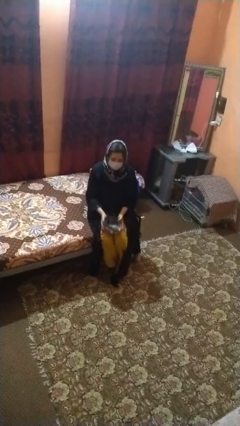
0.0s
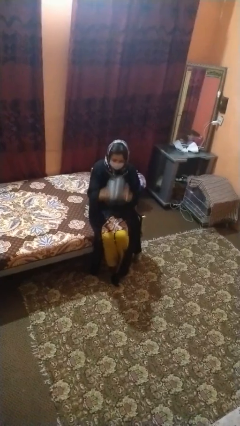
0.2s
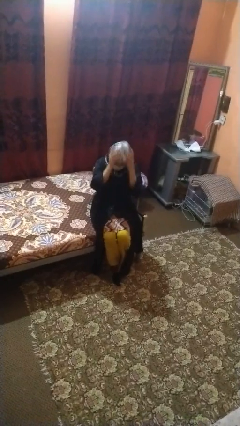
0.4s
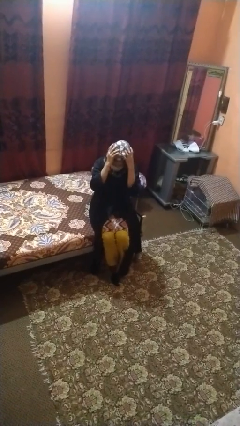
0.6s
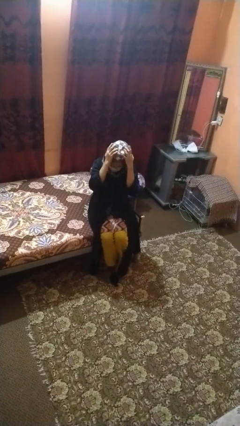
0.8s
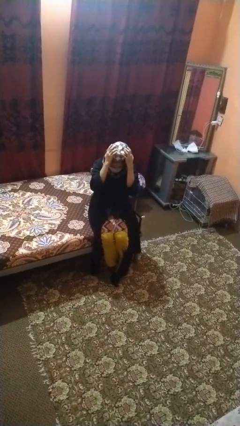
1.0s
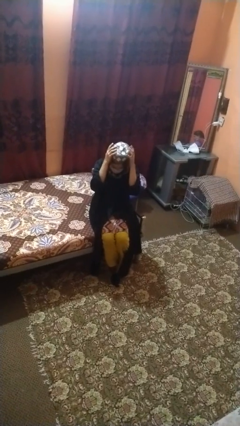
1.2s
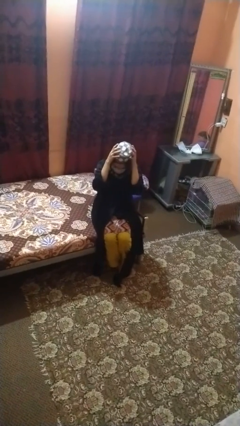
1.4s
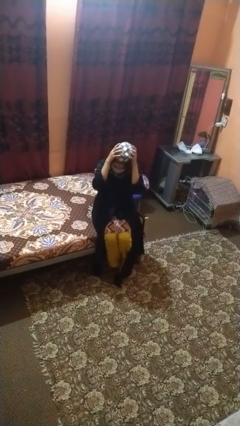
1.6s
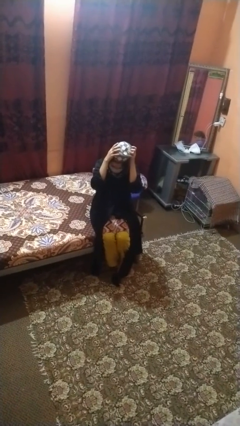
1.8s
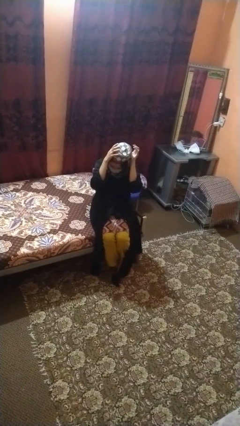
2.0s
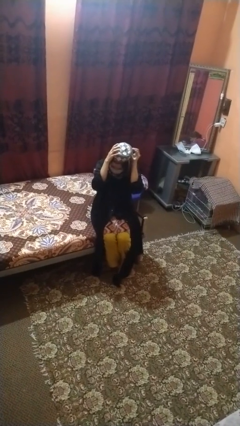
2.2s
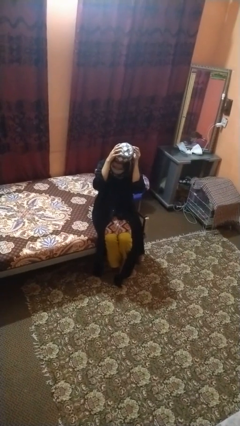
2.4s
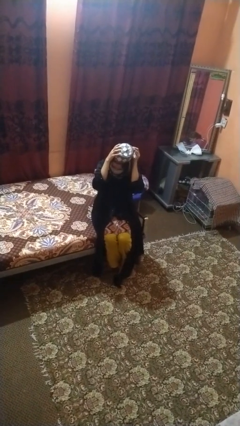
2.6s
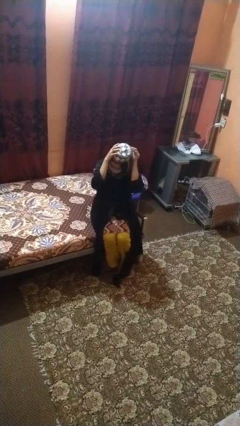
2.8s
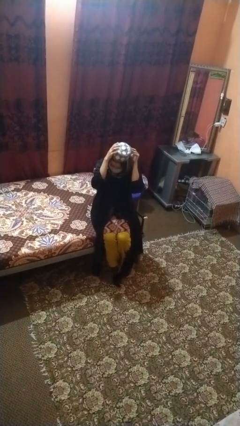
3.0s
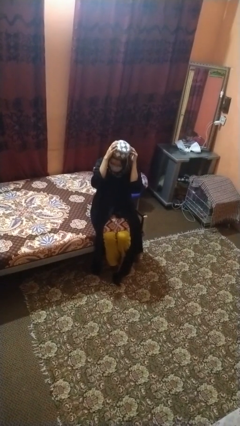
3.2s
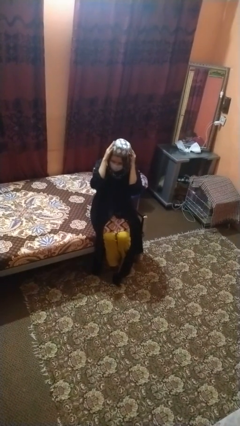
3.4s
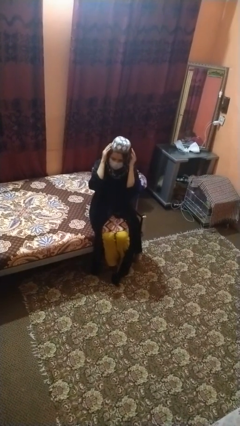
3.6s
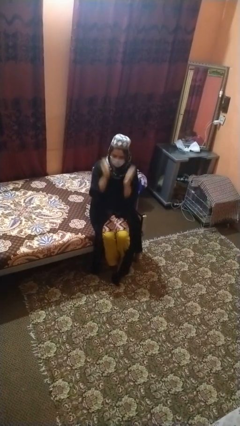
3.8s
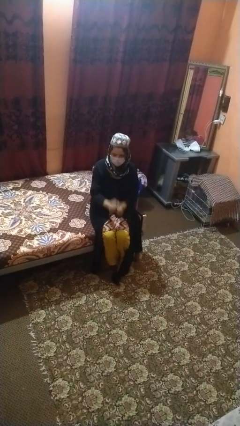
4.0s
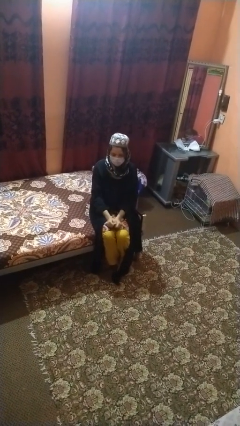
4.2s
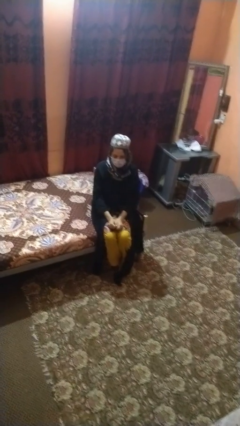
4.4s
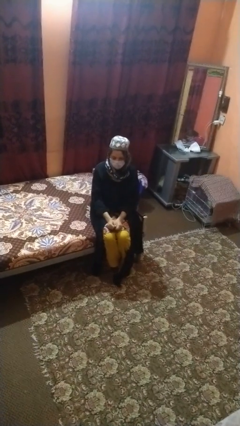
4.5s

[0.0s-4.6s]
person puts on hat

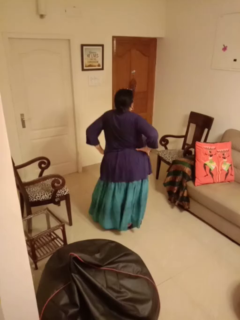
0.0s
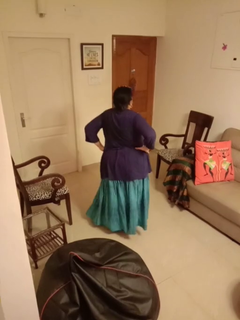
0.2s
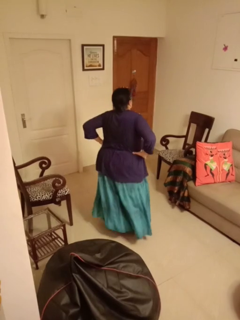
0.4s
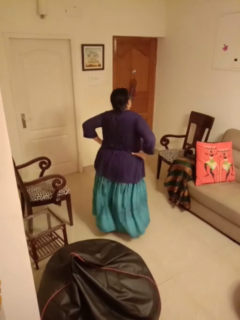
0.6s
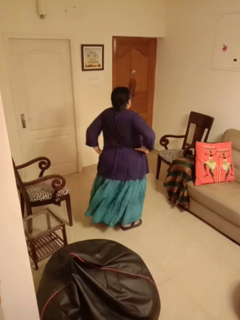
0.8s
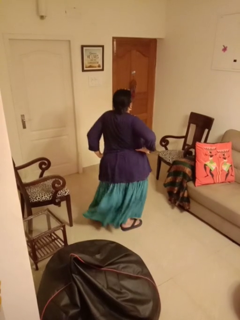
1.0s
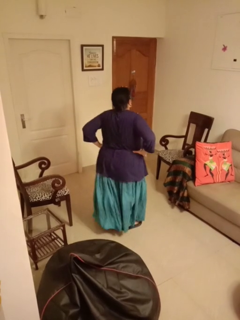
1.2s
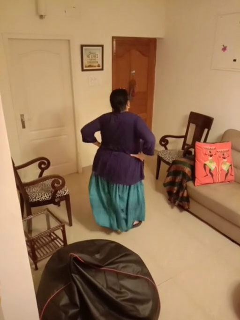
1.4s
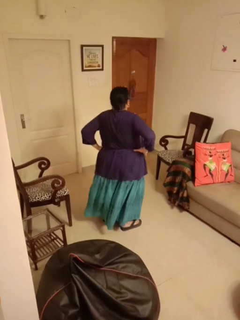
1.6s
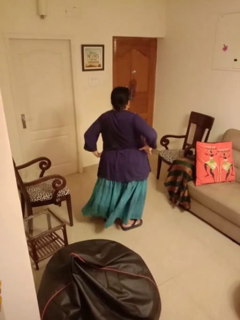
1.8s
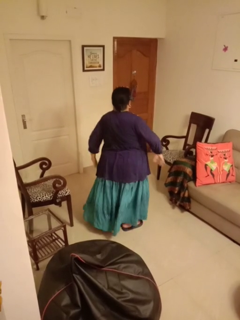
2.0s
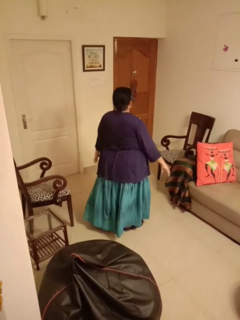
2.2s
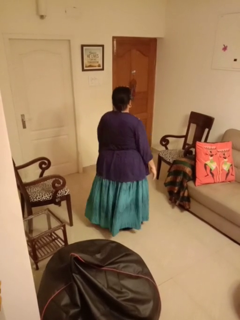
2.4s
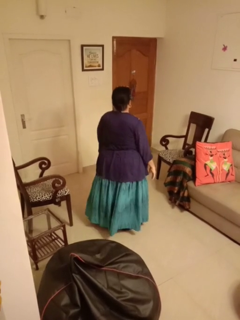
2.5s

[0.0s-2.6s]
person wiggles hips

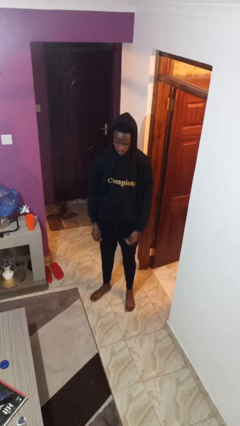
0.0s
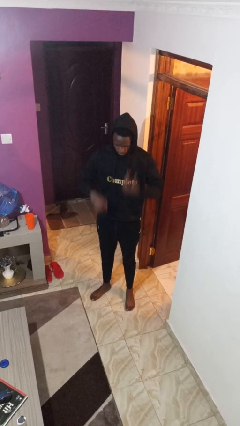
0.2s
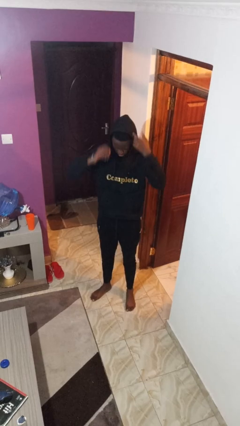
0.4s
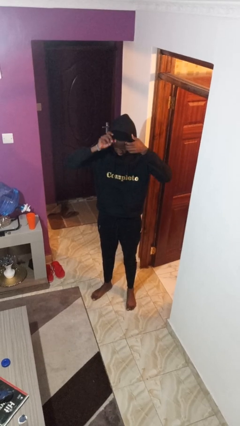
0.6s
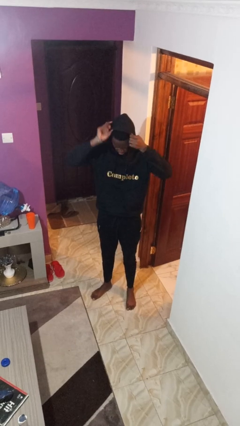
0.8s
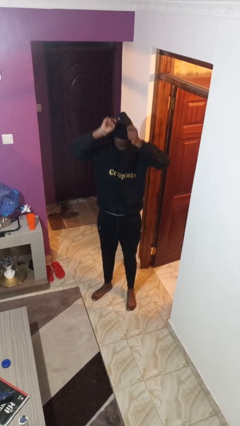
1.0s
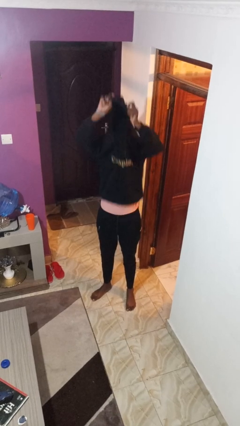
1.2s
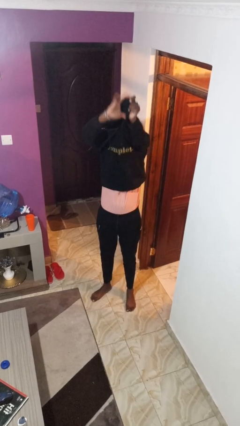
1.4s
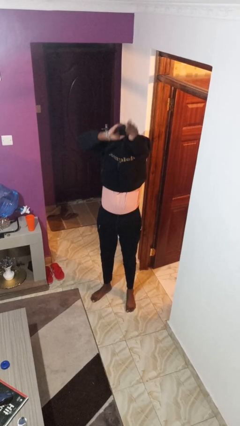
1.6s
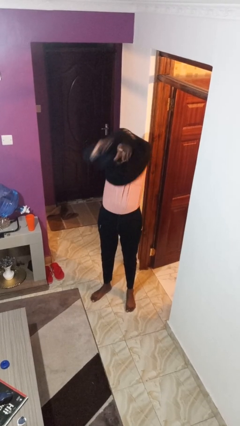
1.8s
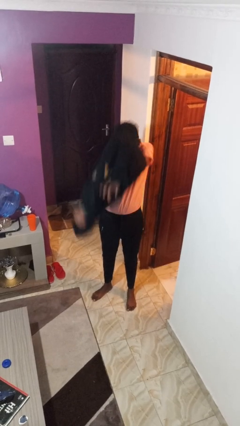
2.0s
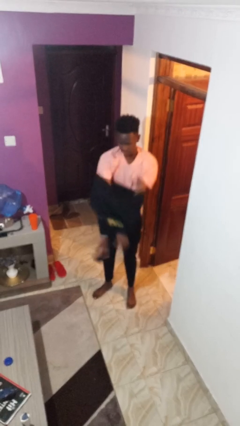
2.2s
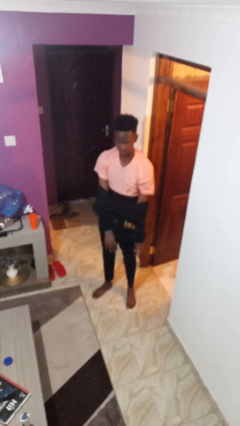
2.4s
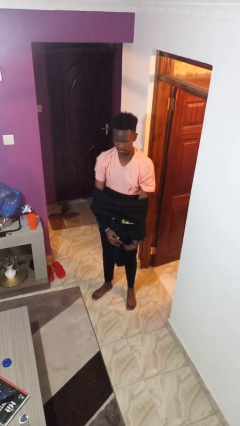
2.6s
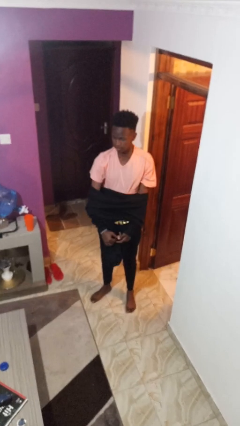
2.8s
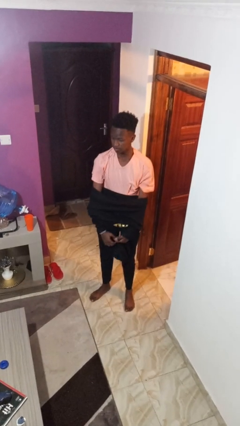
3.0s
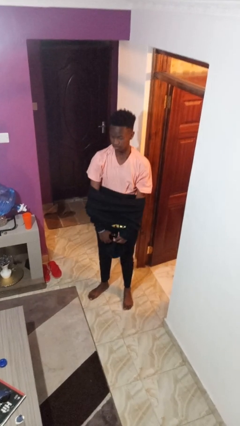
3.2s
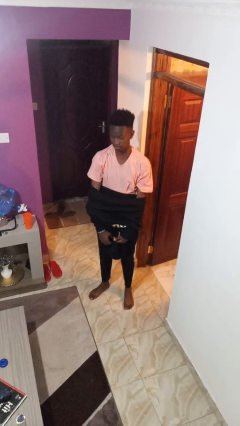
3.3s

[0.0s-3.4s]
person takes off hoodie

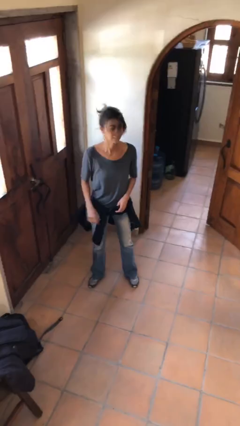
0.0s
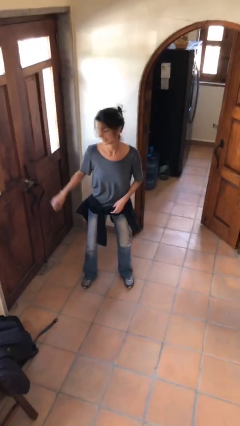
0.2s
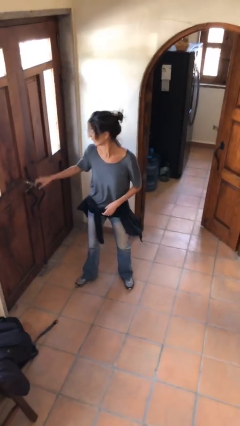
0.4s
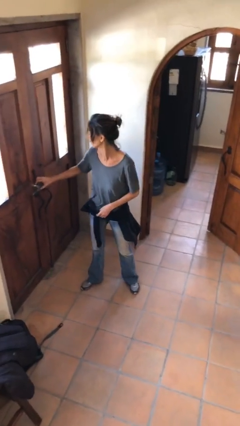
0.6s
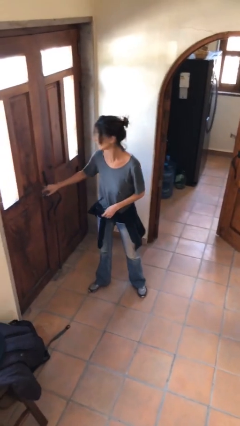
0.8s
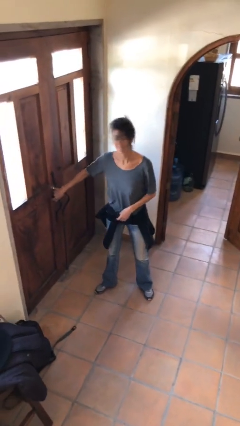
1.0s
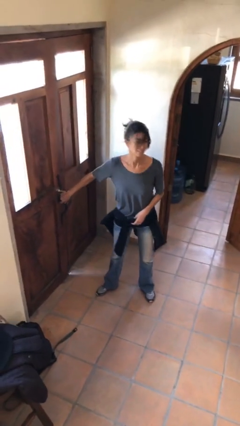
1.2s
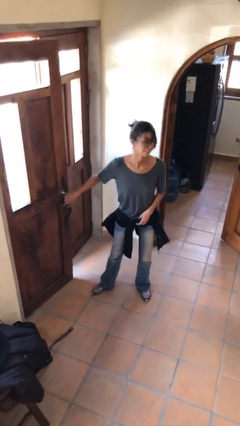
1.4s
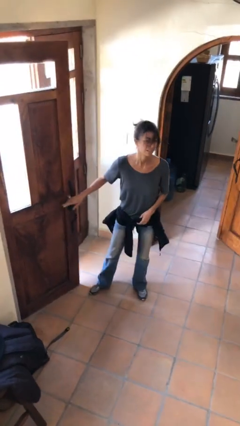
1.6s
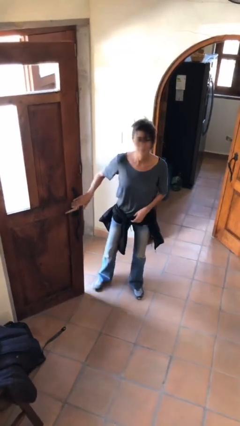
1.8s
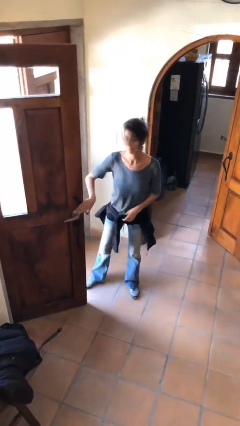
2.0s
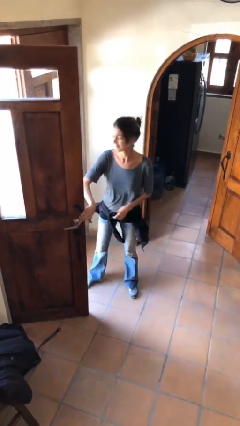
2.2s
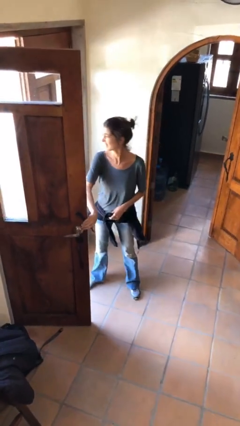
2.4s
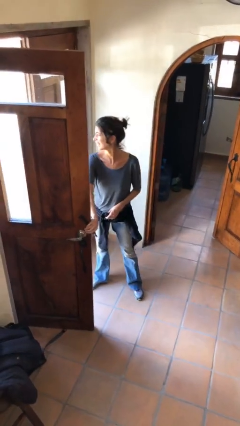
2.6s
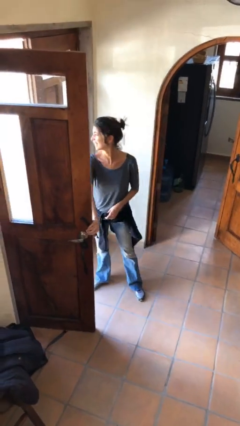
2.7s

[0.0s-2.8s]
person opens facility door

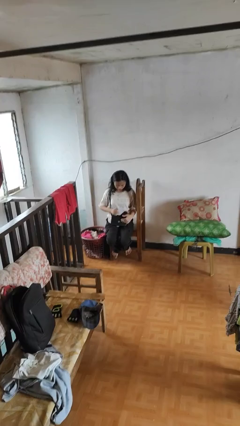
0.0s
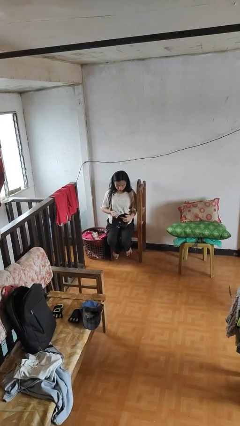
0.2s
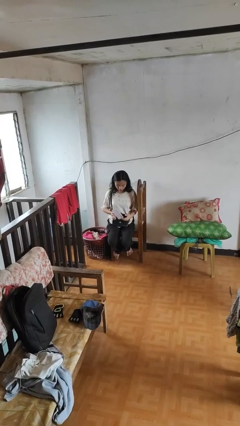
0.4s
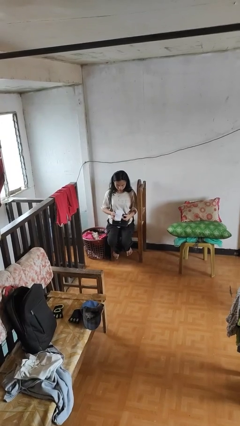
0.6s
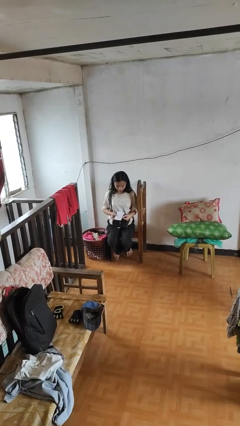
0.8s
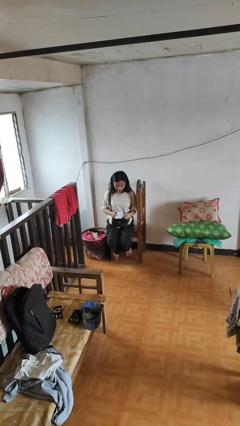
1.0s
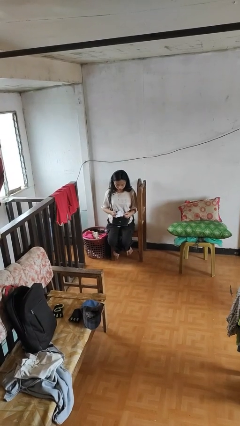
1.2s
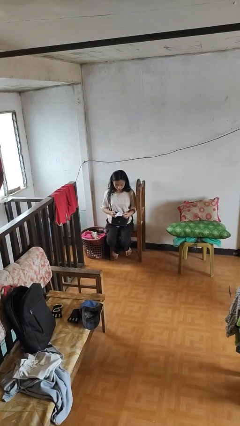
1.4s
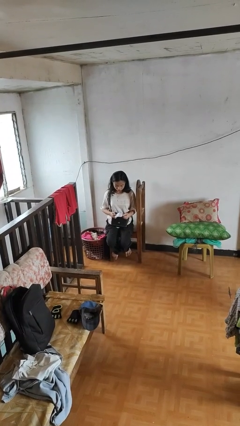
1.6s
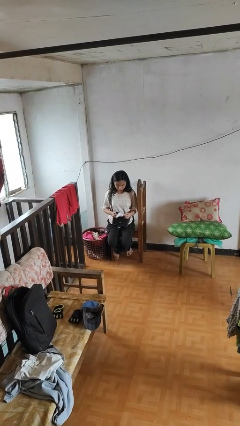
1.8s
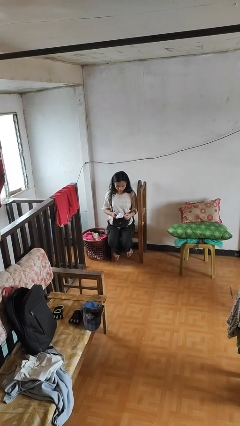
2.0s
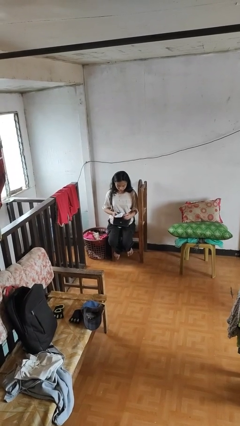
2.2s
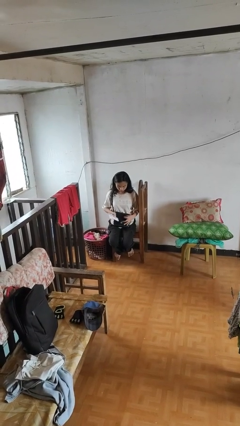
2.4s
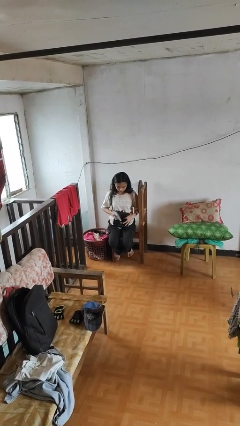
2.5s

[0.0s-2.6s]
person takes object from purse

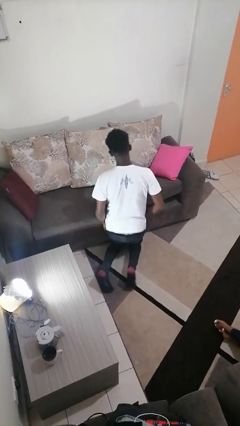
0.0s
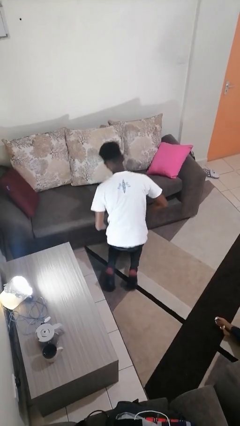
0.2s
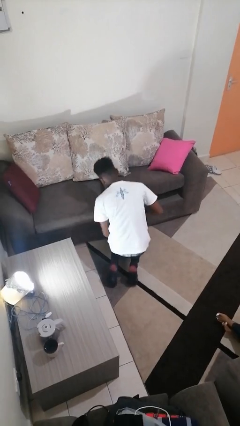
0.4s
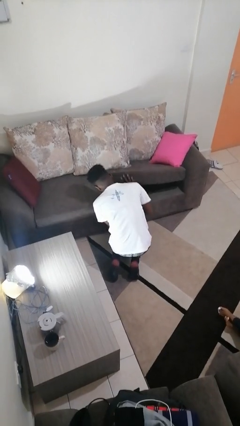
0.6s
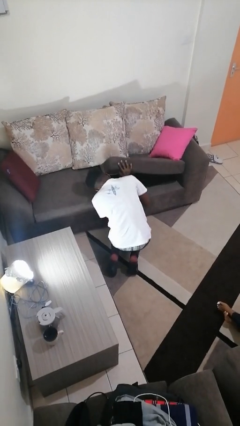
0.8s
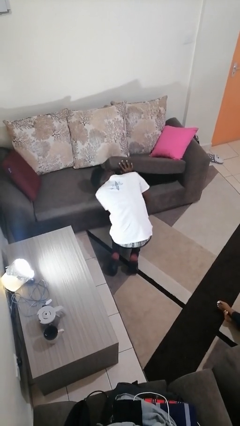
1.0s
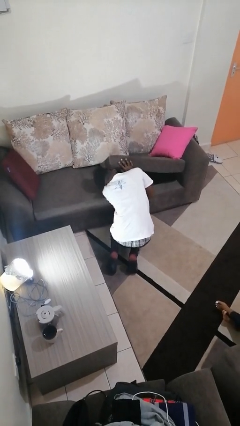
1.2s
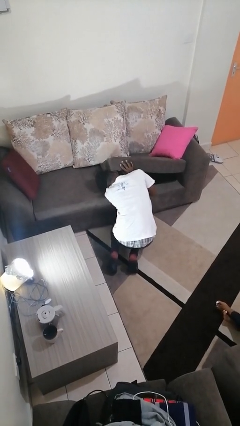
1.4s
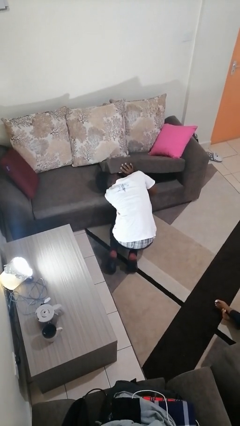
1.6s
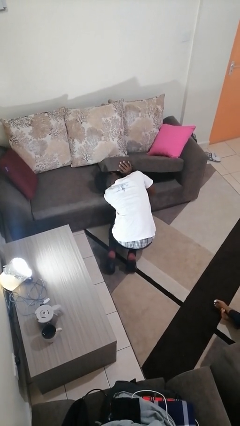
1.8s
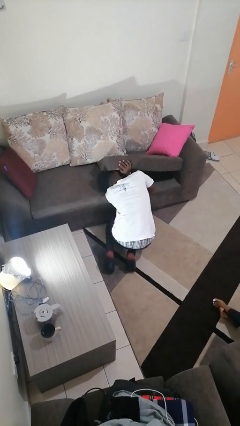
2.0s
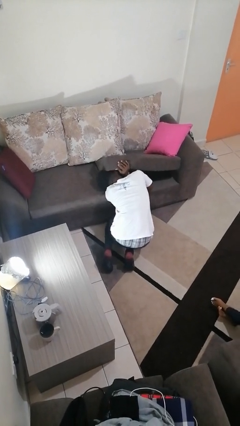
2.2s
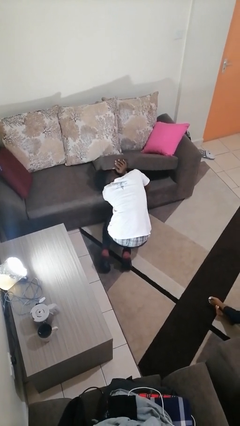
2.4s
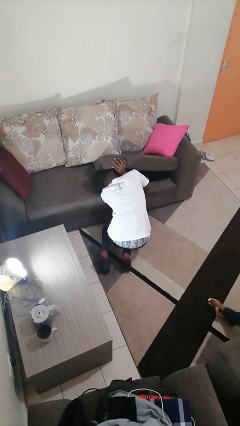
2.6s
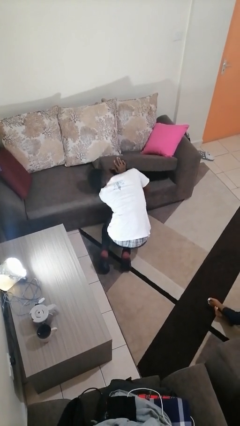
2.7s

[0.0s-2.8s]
person searches under couch
